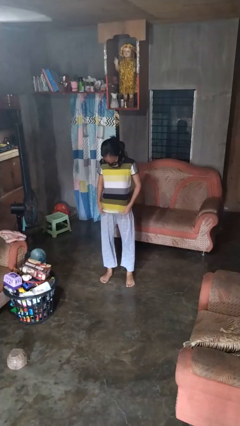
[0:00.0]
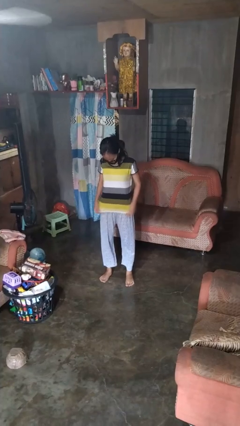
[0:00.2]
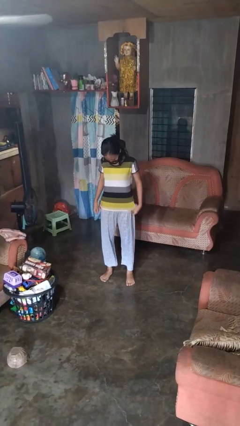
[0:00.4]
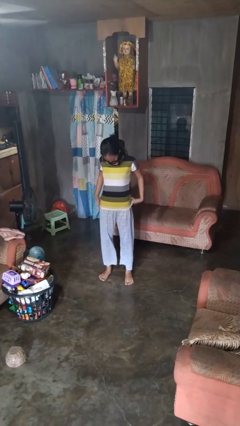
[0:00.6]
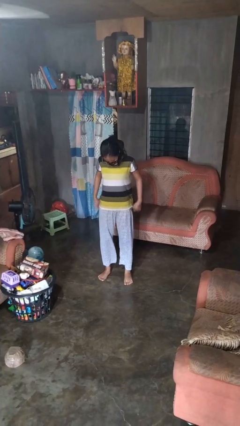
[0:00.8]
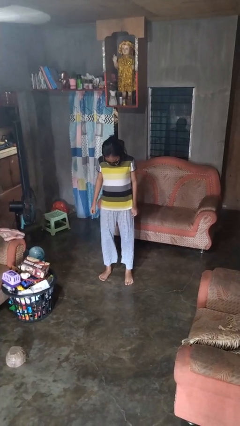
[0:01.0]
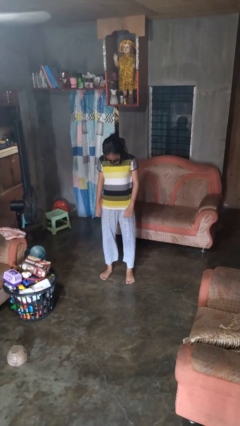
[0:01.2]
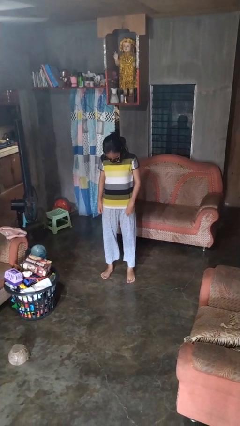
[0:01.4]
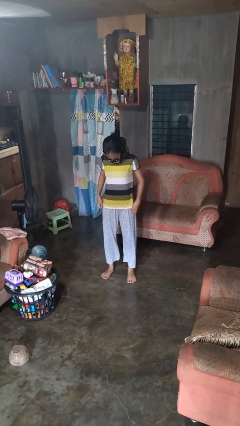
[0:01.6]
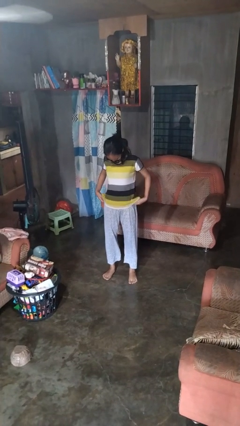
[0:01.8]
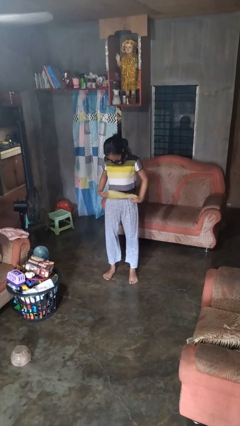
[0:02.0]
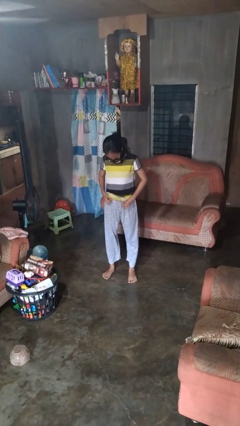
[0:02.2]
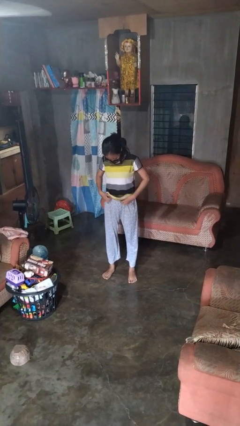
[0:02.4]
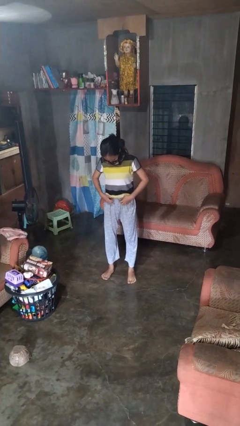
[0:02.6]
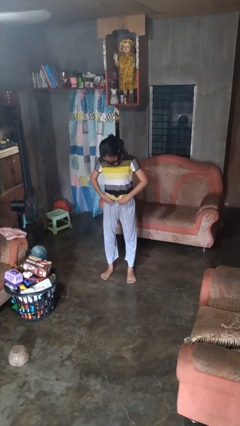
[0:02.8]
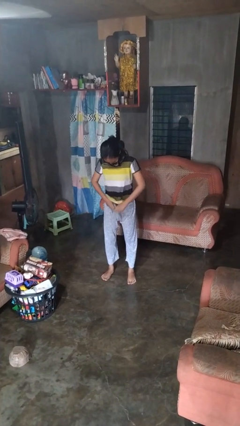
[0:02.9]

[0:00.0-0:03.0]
person tucks in shirt

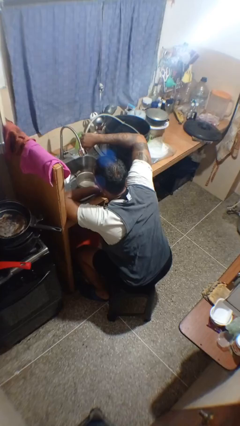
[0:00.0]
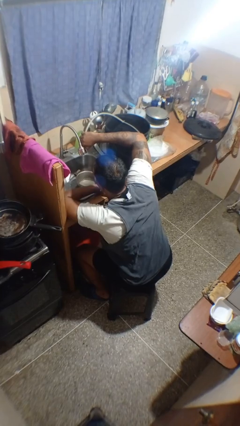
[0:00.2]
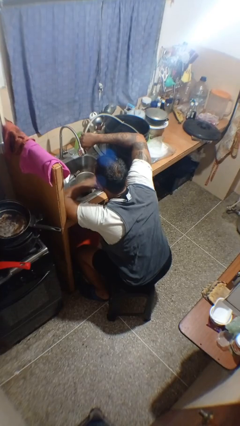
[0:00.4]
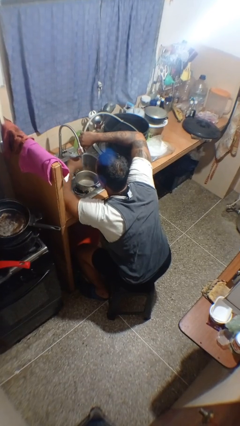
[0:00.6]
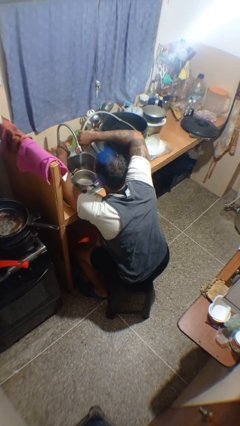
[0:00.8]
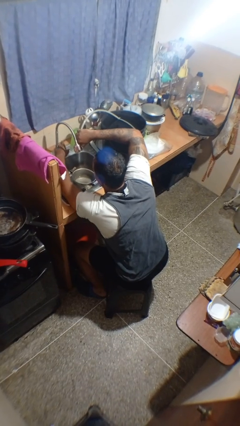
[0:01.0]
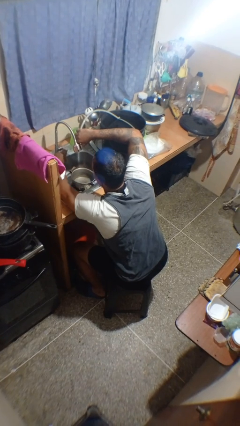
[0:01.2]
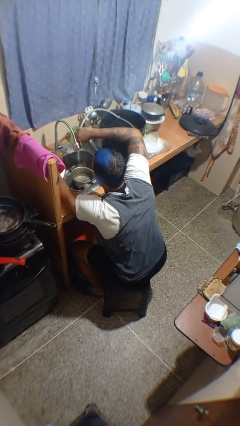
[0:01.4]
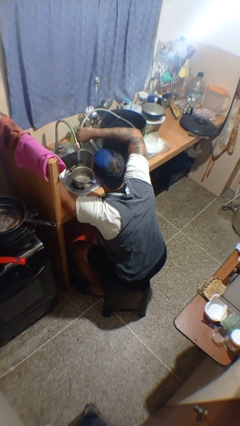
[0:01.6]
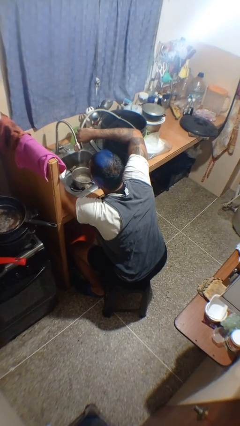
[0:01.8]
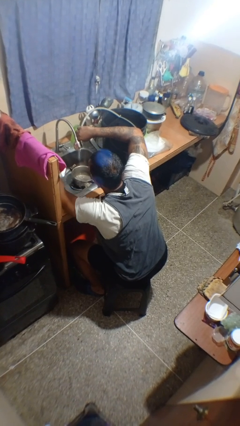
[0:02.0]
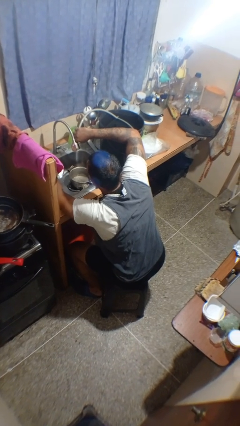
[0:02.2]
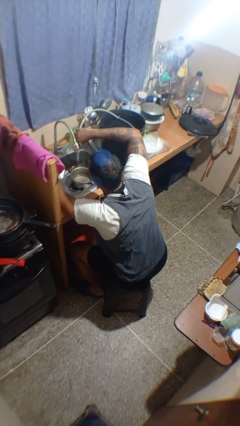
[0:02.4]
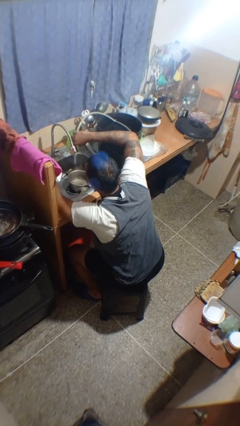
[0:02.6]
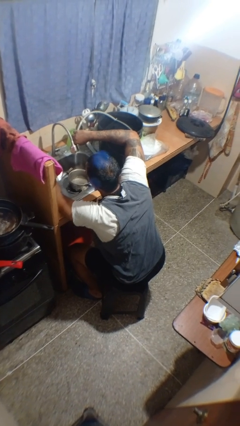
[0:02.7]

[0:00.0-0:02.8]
person turns on faucet

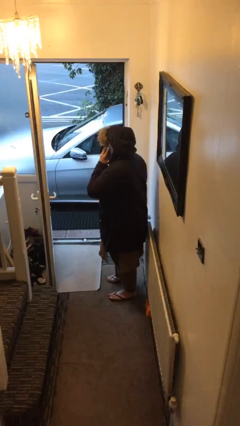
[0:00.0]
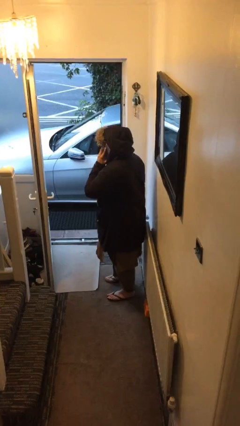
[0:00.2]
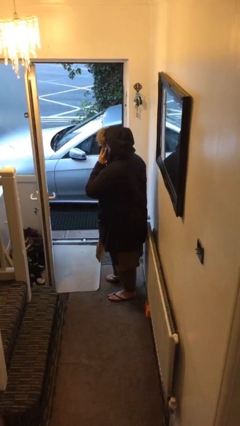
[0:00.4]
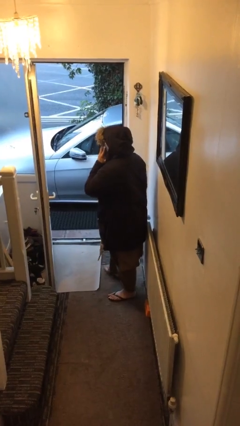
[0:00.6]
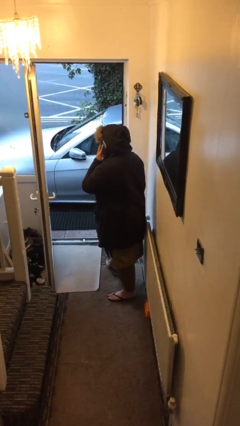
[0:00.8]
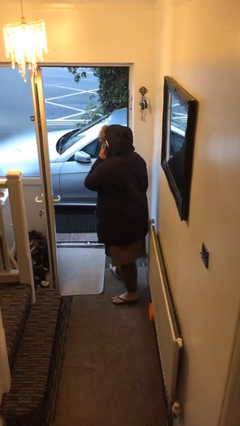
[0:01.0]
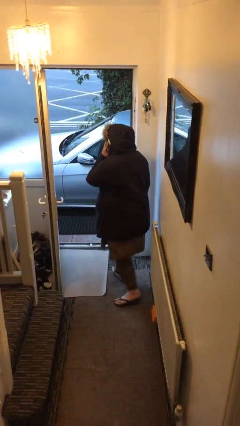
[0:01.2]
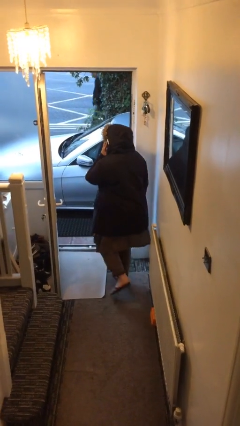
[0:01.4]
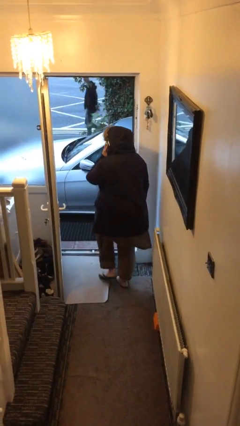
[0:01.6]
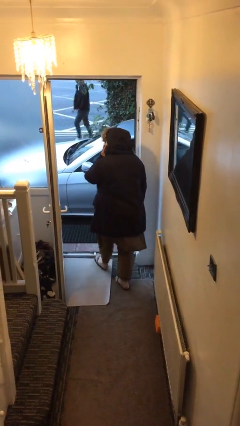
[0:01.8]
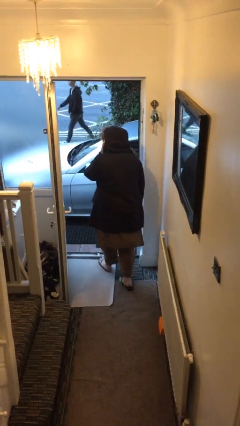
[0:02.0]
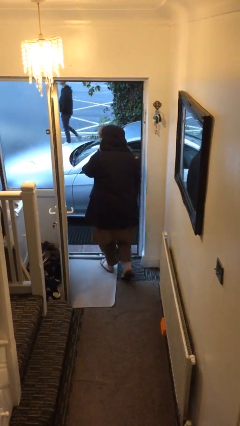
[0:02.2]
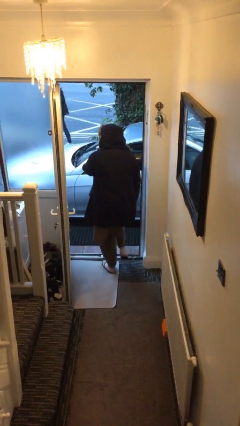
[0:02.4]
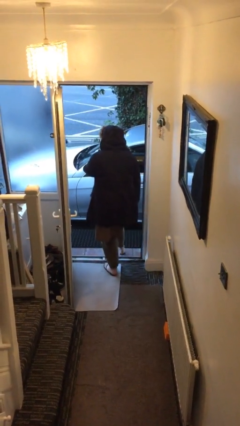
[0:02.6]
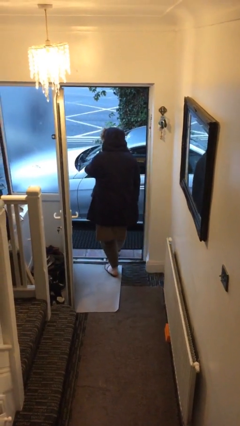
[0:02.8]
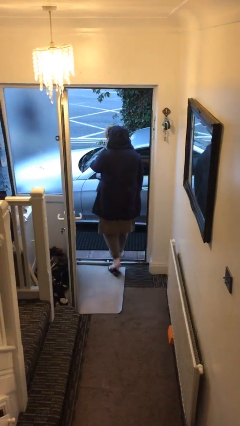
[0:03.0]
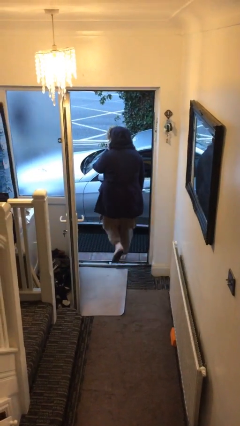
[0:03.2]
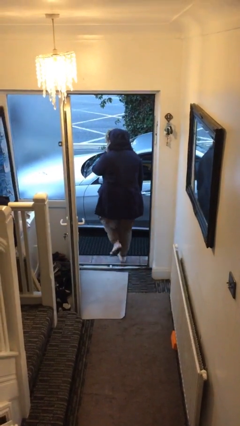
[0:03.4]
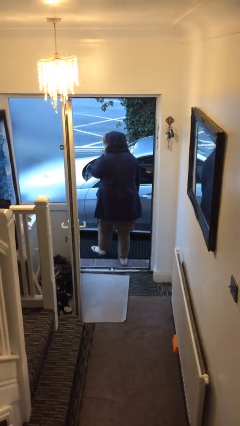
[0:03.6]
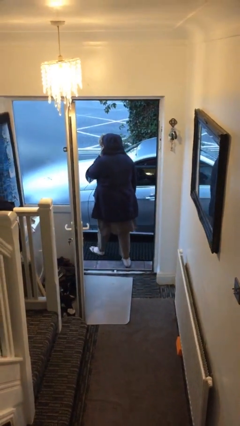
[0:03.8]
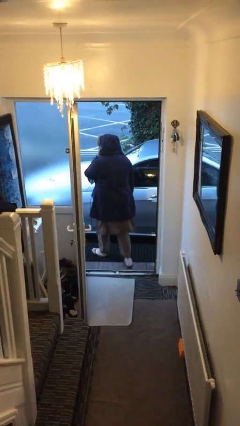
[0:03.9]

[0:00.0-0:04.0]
person exits scene through structure

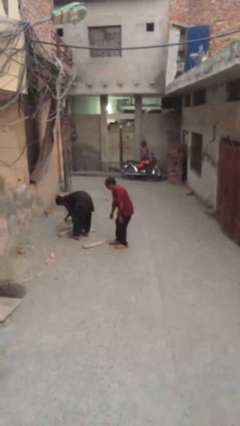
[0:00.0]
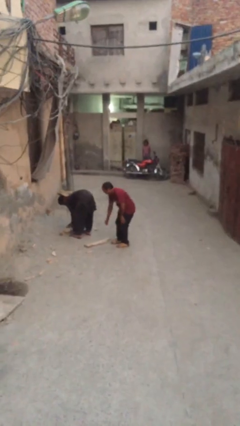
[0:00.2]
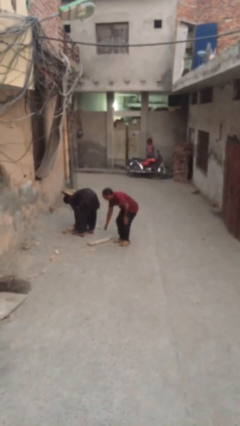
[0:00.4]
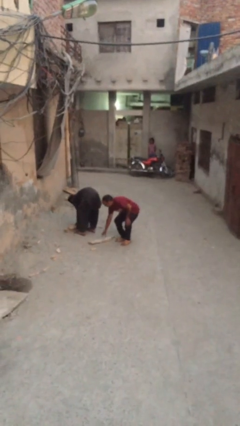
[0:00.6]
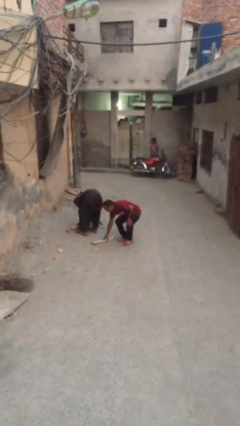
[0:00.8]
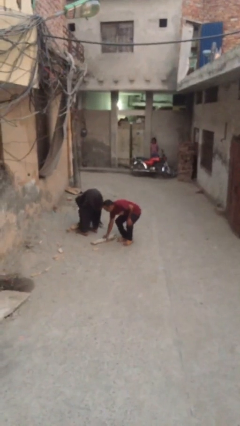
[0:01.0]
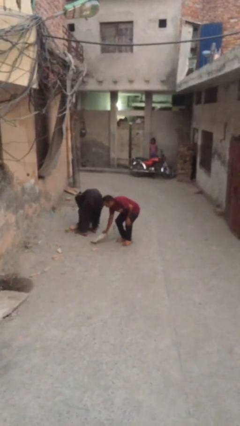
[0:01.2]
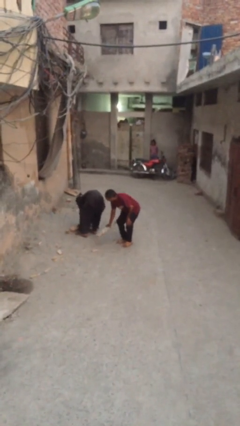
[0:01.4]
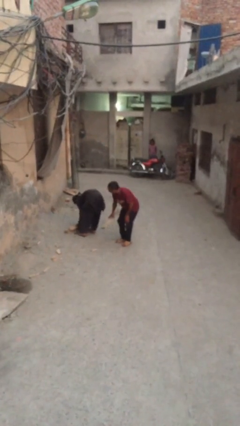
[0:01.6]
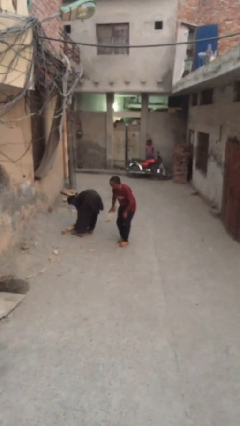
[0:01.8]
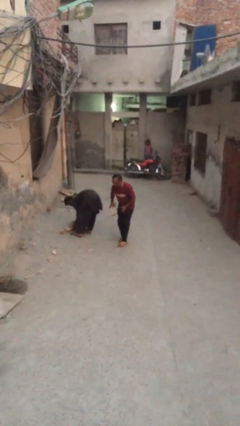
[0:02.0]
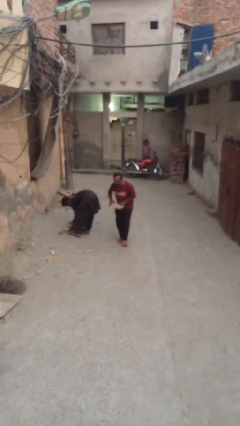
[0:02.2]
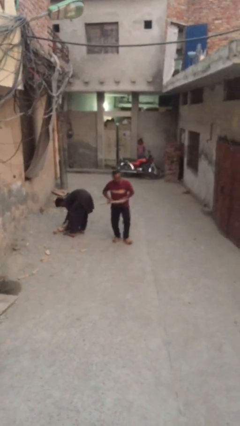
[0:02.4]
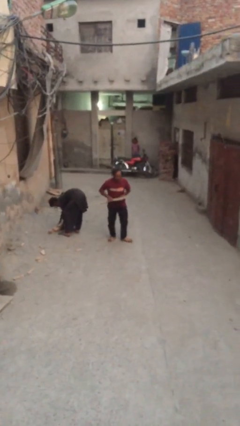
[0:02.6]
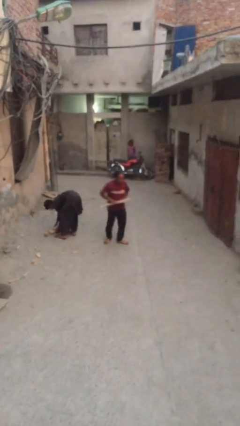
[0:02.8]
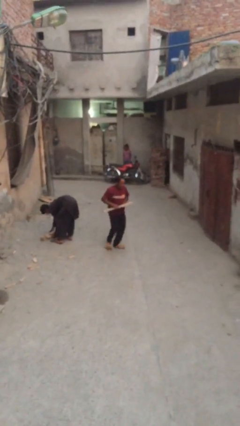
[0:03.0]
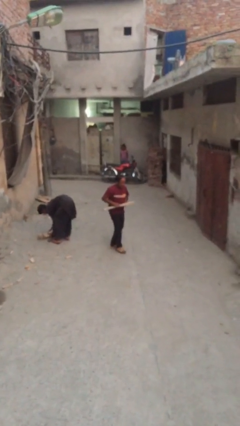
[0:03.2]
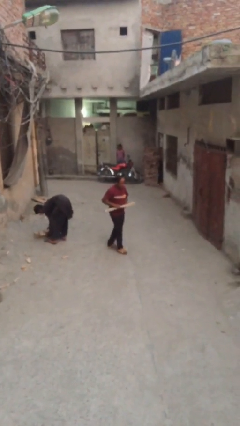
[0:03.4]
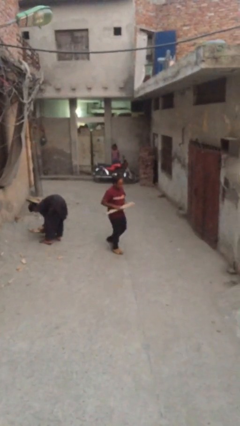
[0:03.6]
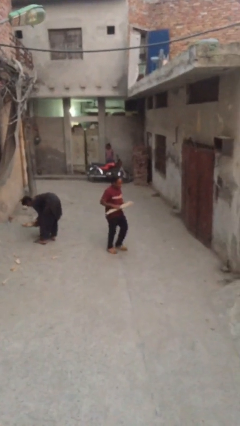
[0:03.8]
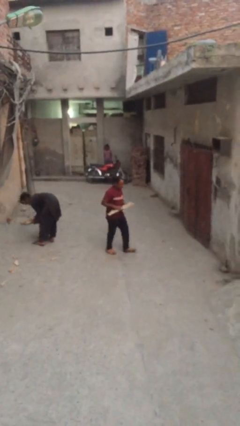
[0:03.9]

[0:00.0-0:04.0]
person steals object from person

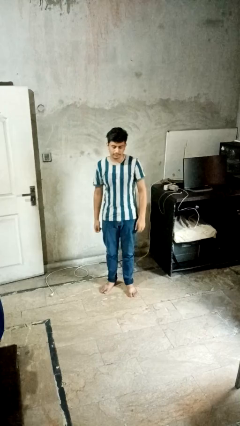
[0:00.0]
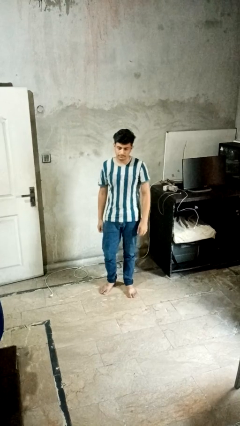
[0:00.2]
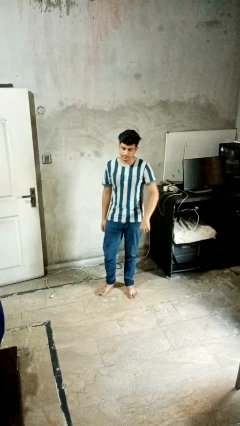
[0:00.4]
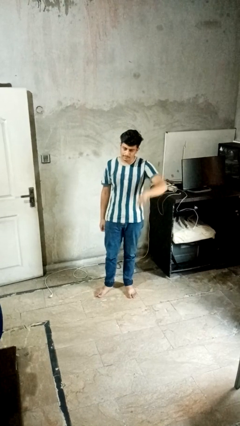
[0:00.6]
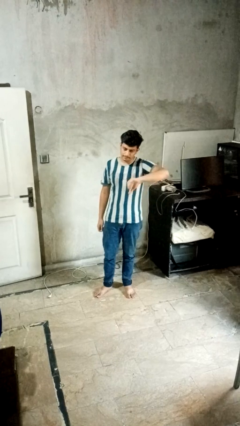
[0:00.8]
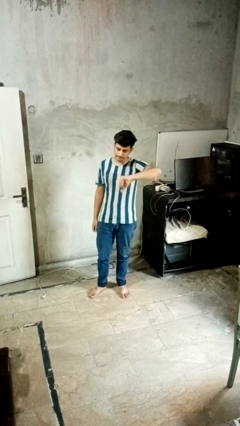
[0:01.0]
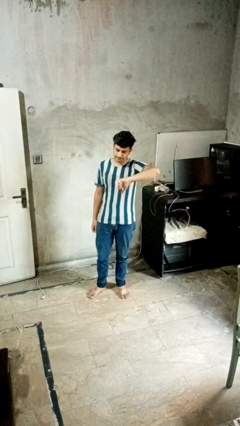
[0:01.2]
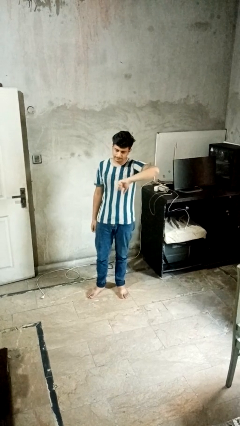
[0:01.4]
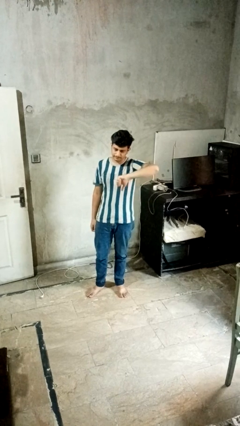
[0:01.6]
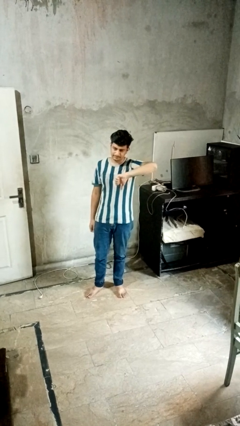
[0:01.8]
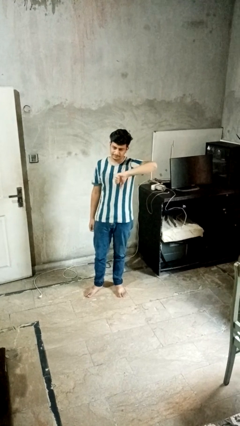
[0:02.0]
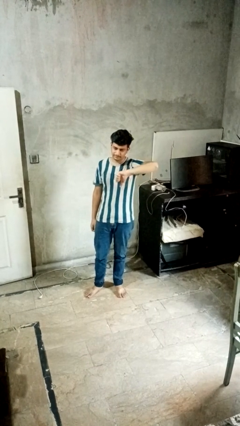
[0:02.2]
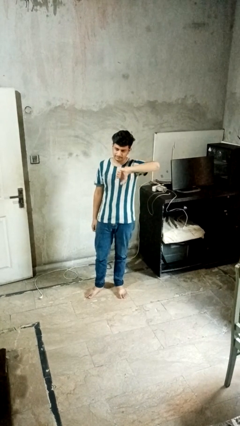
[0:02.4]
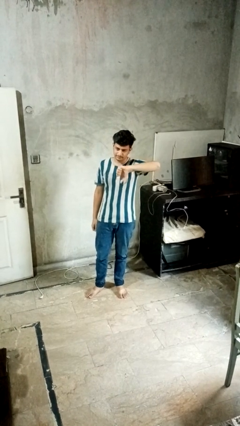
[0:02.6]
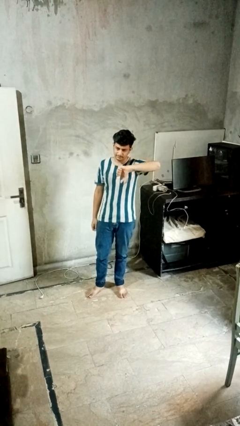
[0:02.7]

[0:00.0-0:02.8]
person gestures thumbs down

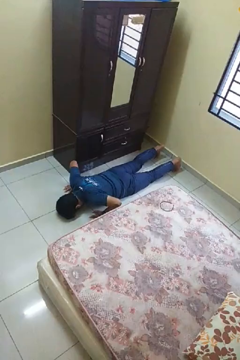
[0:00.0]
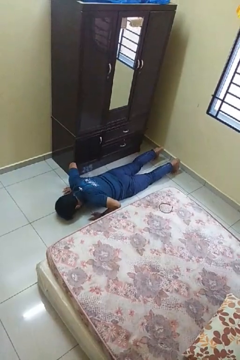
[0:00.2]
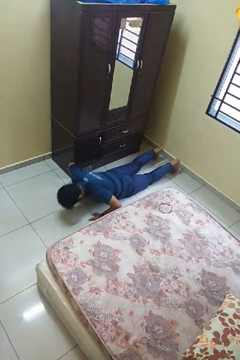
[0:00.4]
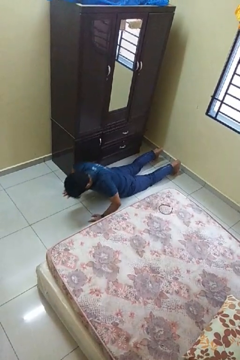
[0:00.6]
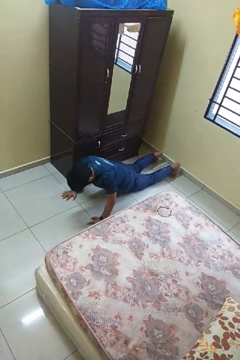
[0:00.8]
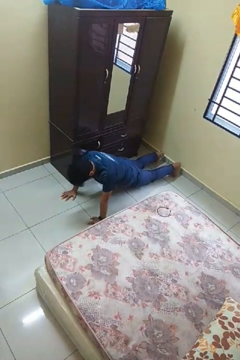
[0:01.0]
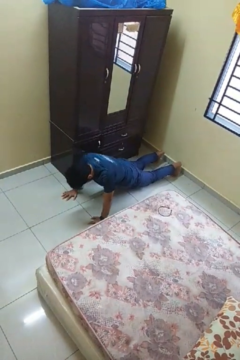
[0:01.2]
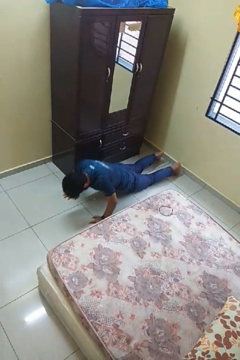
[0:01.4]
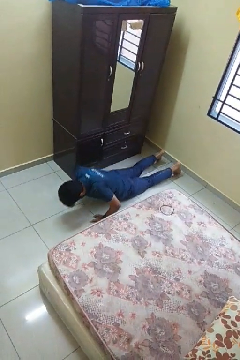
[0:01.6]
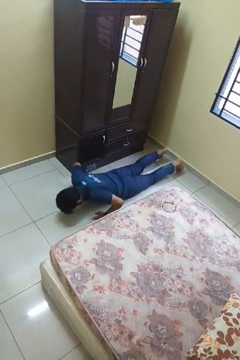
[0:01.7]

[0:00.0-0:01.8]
person exercises with pushup
